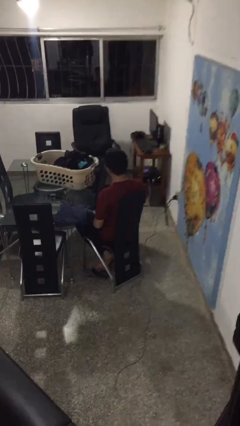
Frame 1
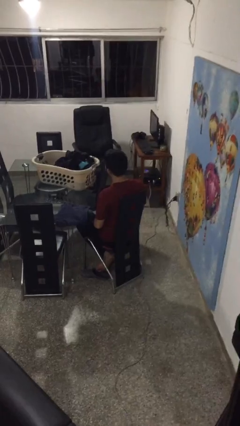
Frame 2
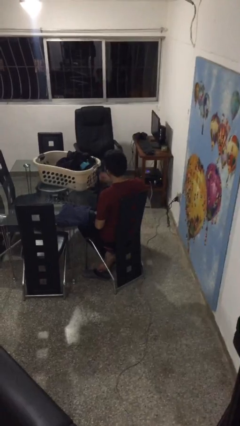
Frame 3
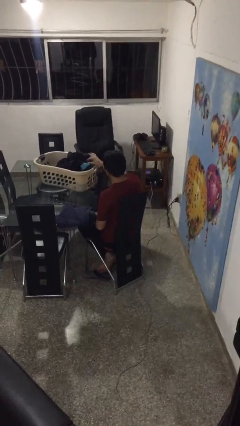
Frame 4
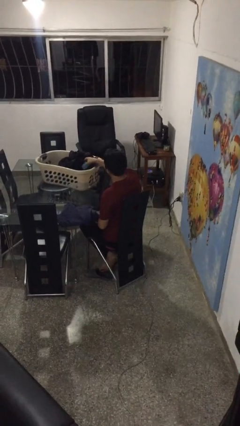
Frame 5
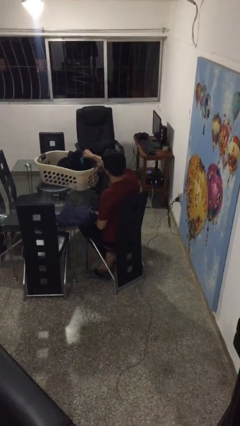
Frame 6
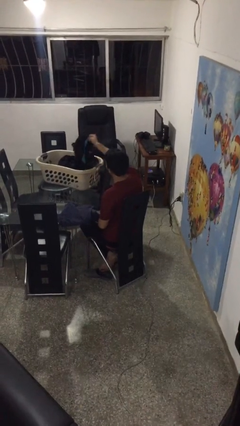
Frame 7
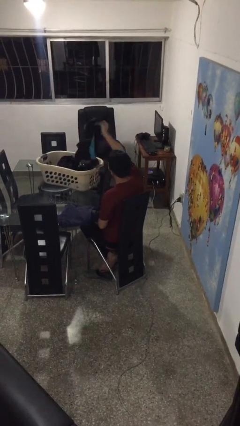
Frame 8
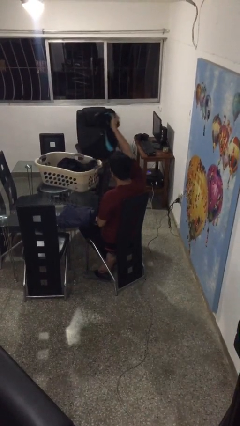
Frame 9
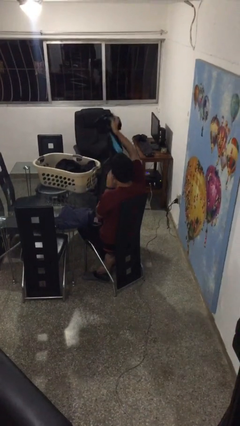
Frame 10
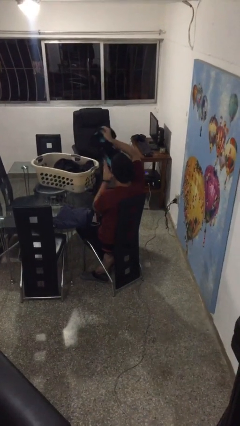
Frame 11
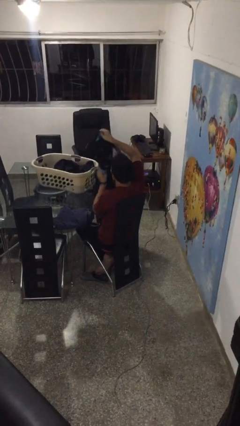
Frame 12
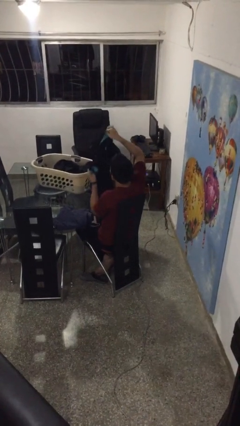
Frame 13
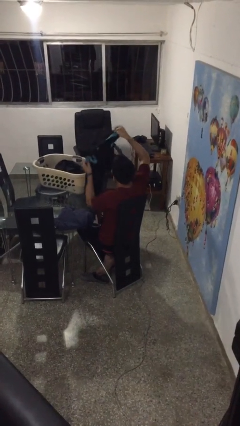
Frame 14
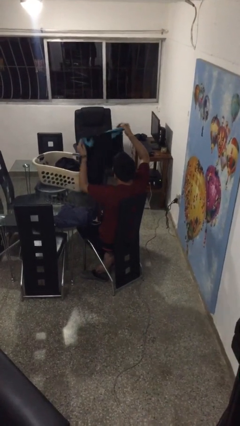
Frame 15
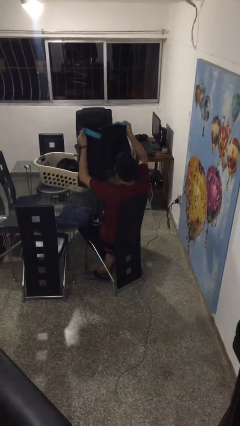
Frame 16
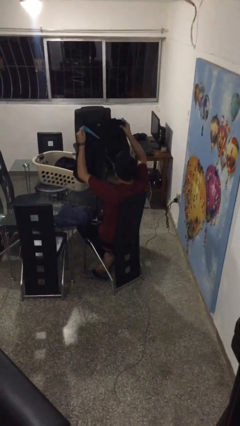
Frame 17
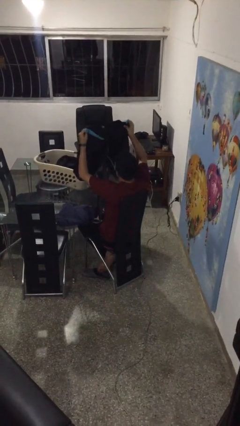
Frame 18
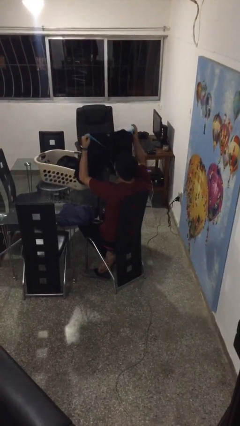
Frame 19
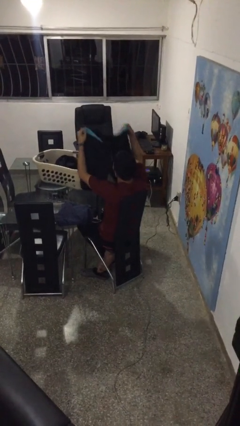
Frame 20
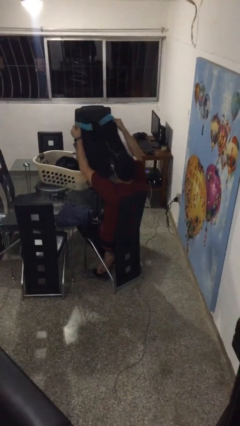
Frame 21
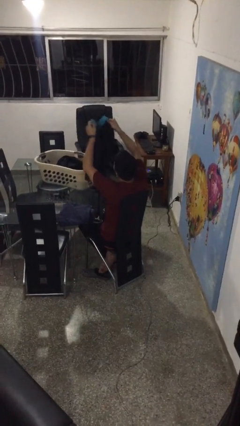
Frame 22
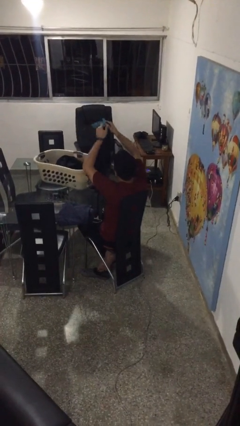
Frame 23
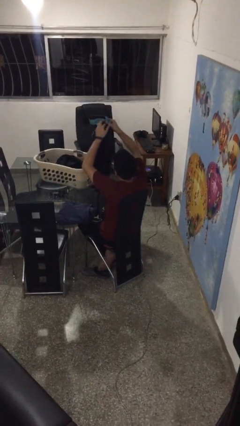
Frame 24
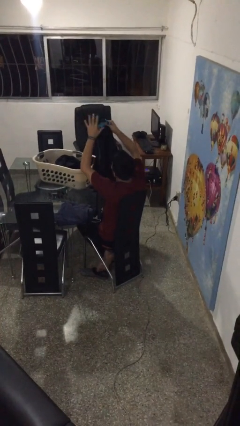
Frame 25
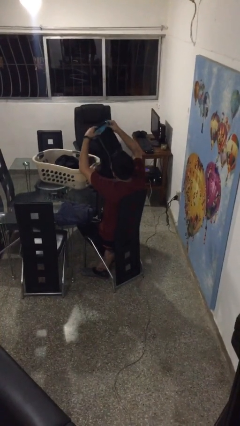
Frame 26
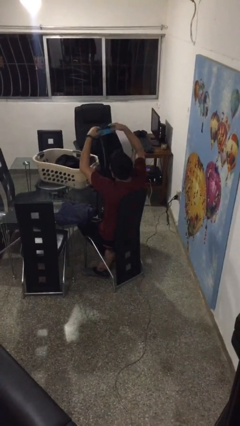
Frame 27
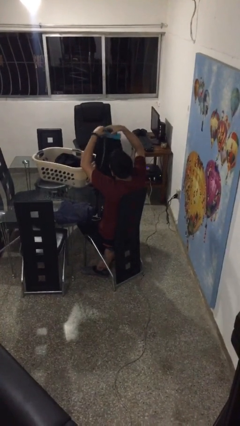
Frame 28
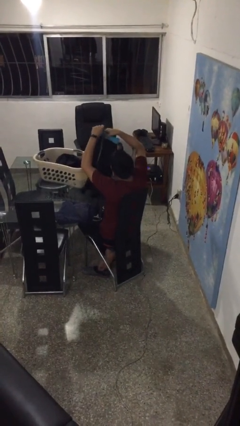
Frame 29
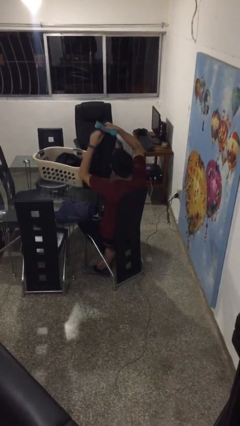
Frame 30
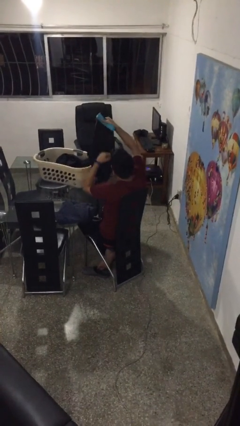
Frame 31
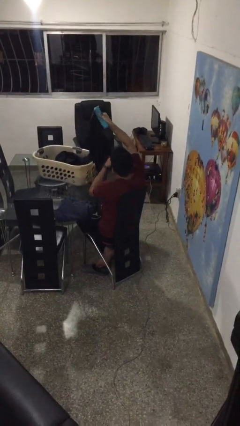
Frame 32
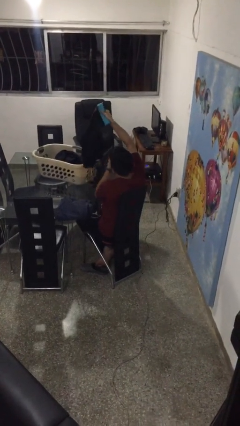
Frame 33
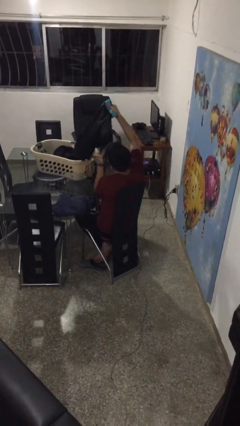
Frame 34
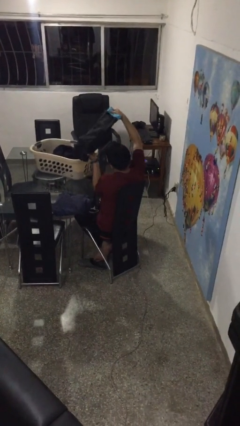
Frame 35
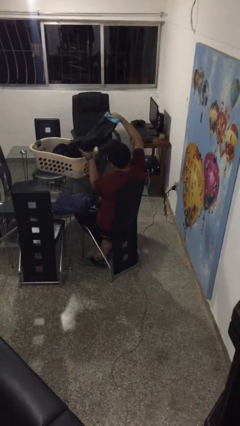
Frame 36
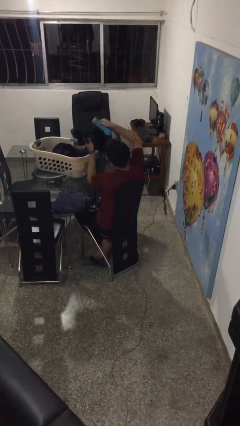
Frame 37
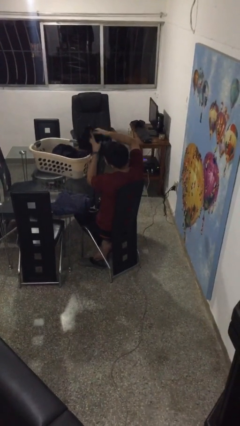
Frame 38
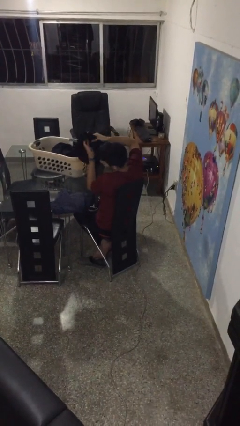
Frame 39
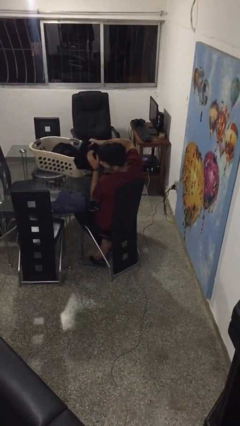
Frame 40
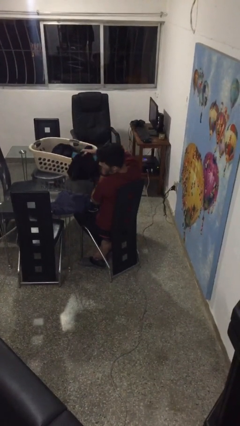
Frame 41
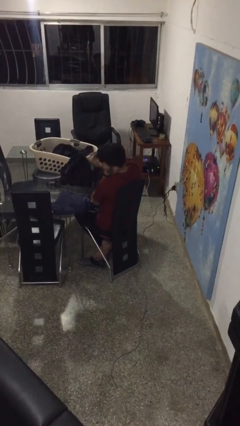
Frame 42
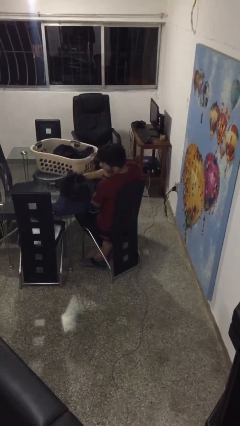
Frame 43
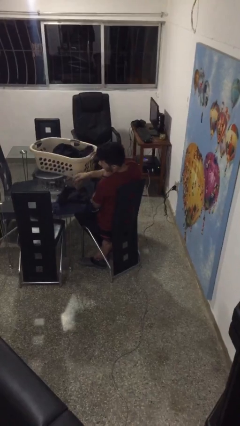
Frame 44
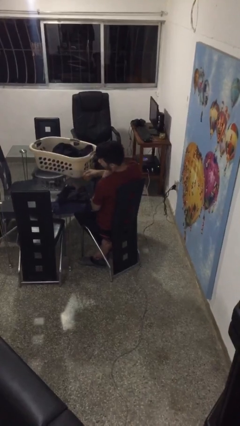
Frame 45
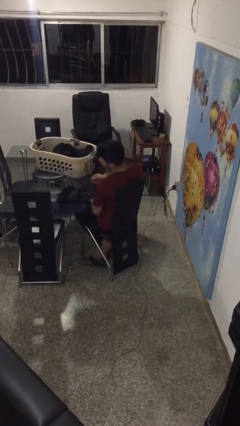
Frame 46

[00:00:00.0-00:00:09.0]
person folds pants

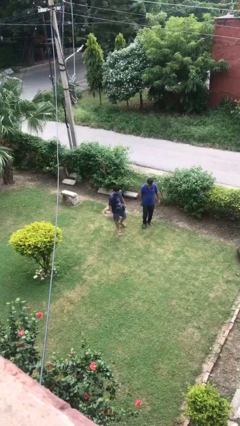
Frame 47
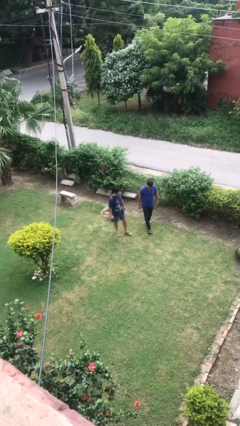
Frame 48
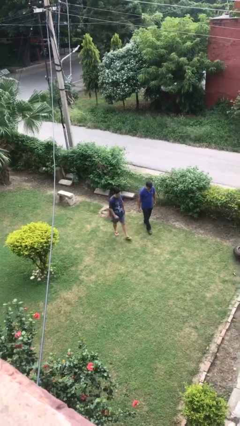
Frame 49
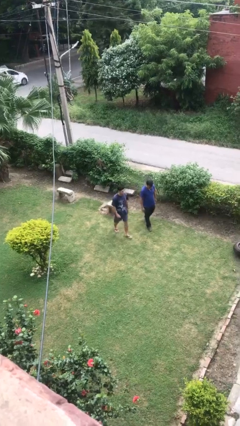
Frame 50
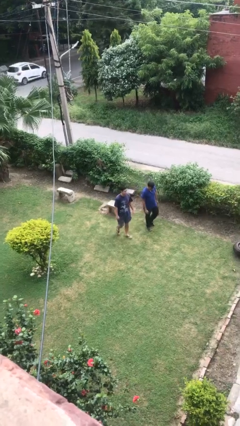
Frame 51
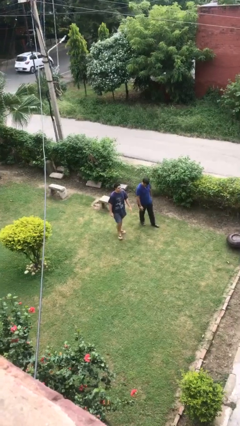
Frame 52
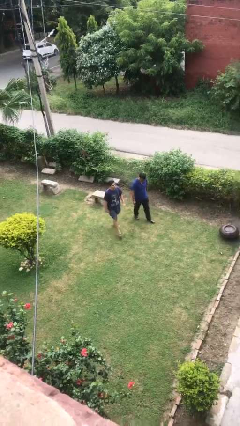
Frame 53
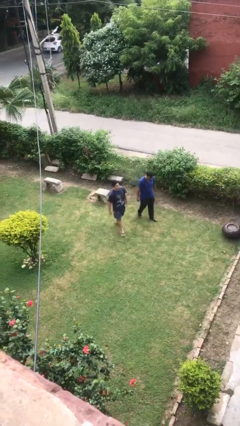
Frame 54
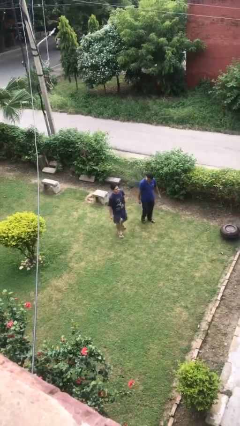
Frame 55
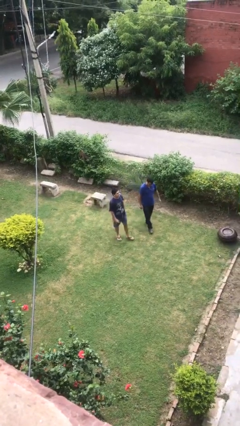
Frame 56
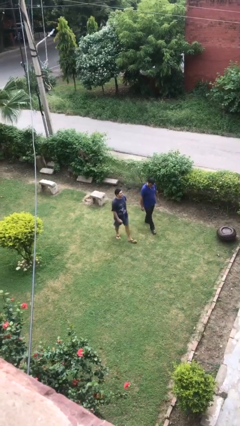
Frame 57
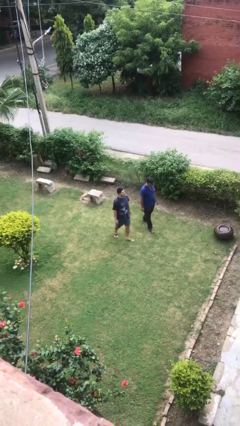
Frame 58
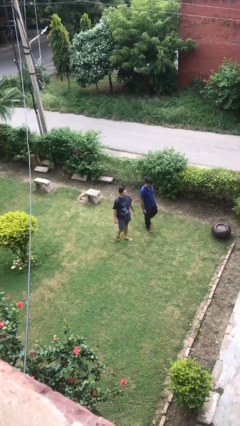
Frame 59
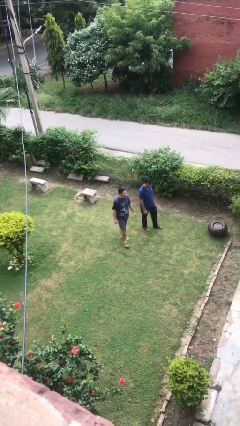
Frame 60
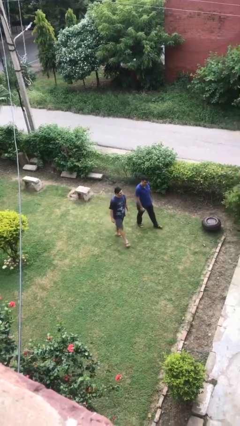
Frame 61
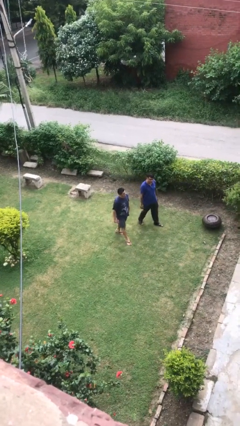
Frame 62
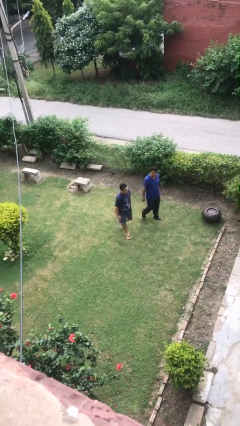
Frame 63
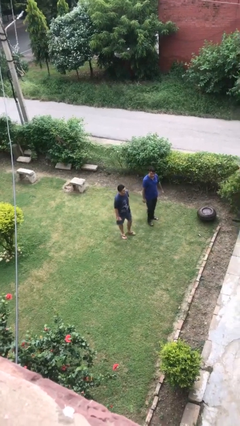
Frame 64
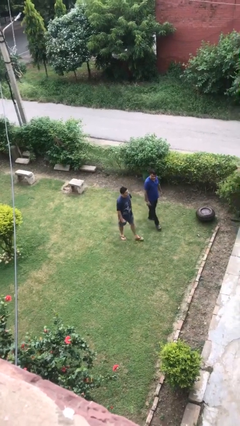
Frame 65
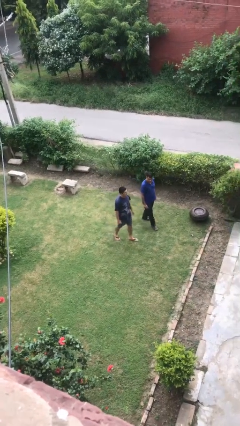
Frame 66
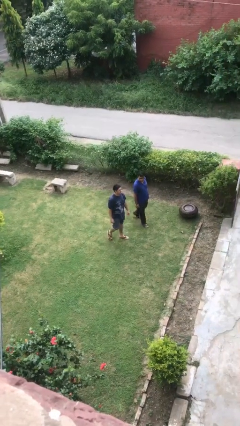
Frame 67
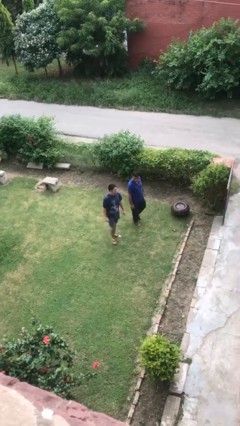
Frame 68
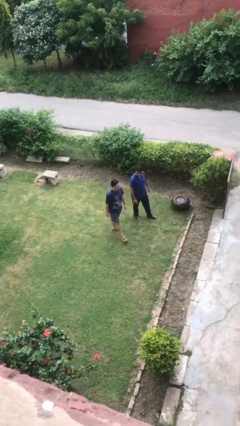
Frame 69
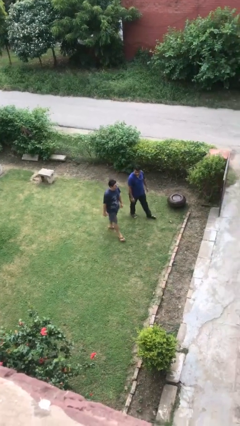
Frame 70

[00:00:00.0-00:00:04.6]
person talks to person

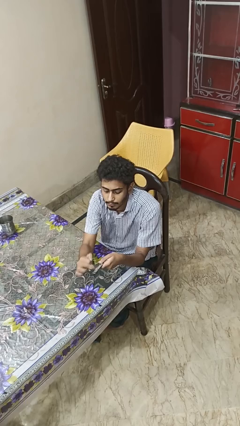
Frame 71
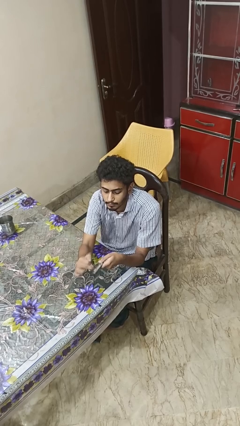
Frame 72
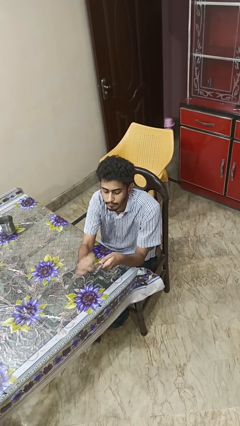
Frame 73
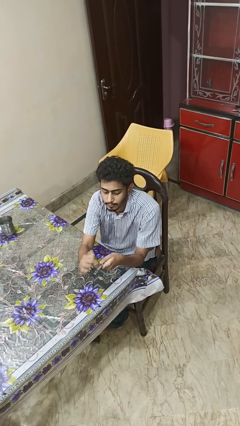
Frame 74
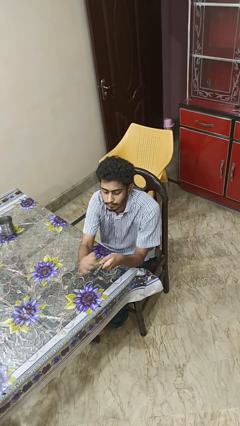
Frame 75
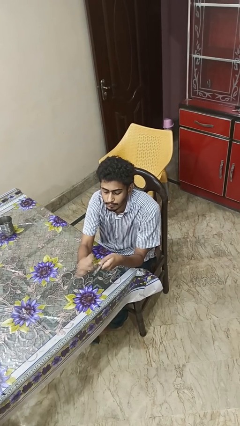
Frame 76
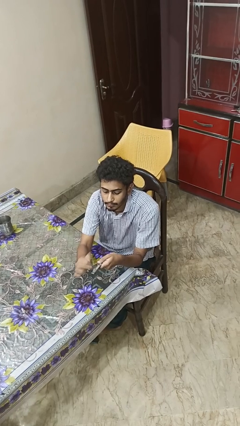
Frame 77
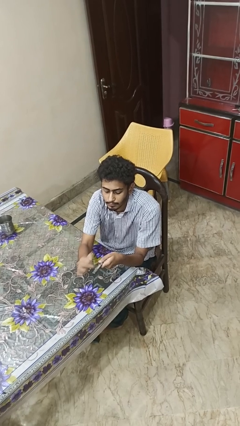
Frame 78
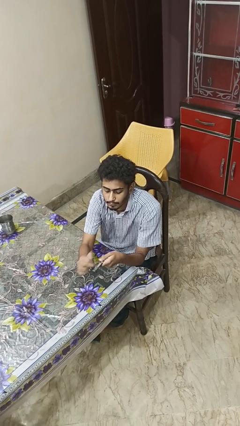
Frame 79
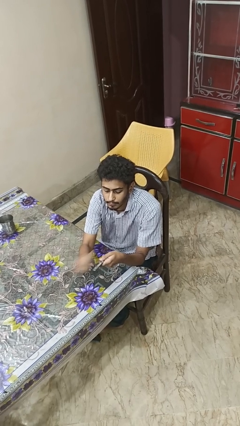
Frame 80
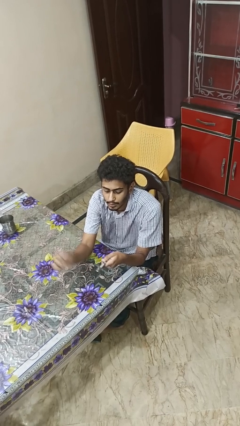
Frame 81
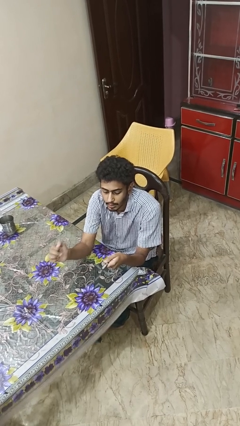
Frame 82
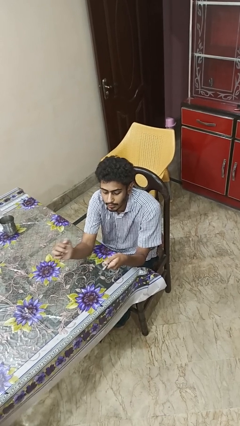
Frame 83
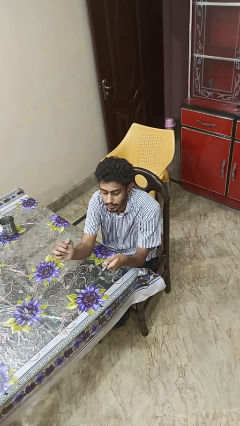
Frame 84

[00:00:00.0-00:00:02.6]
person files fingernails

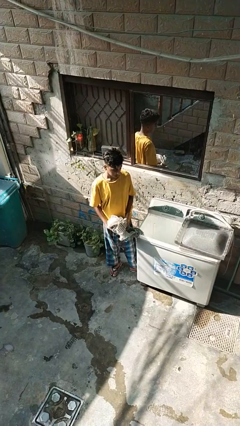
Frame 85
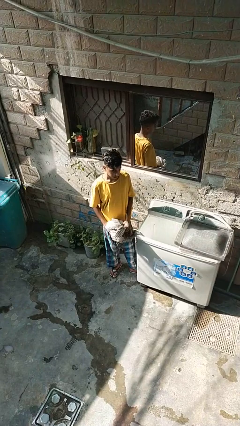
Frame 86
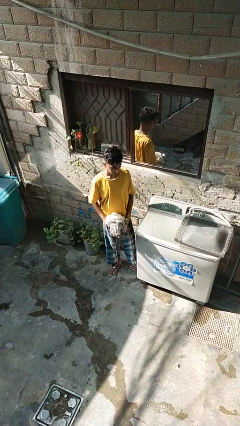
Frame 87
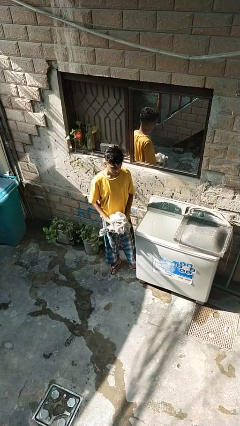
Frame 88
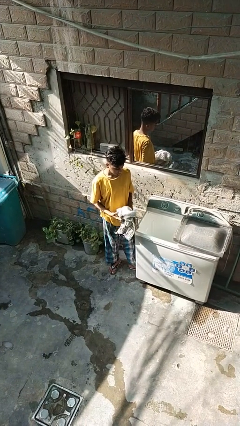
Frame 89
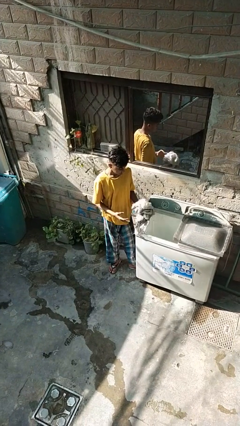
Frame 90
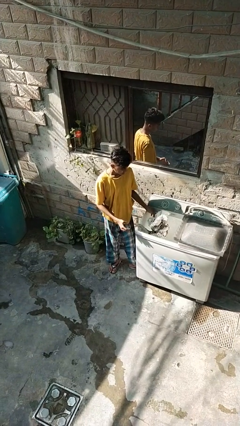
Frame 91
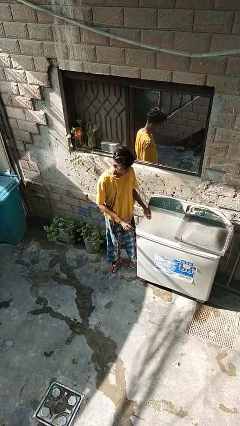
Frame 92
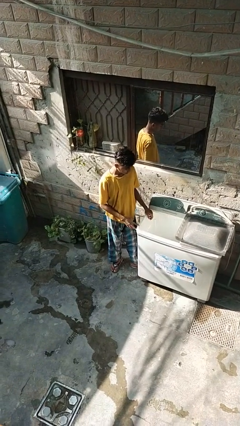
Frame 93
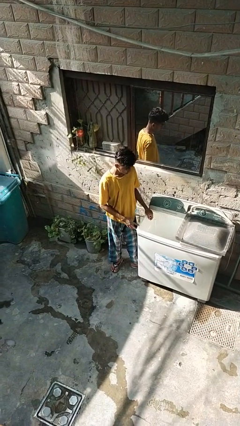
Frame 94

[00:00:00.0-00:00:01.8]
person loads clotheswasher
